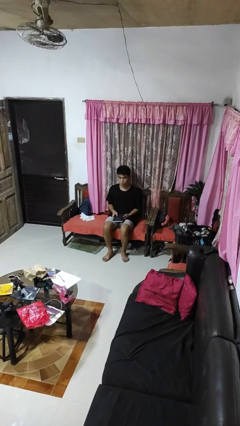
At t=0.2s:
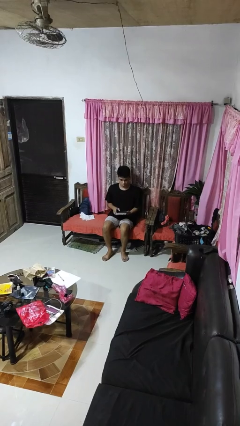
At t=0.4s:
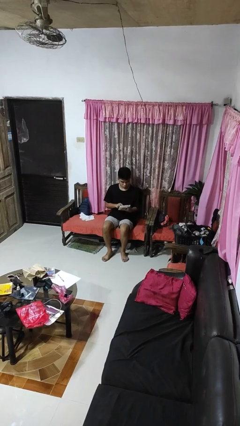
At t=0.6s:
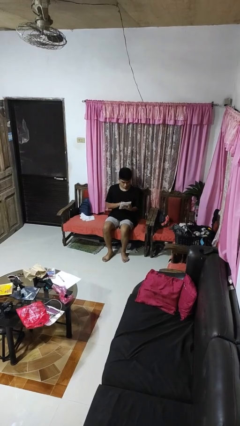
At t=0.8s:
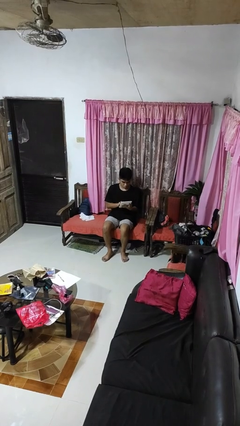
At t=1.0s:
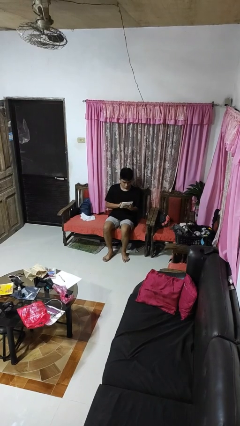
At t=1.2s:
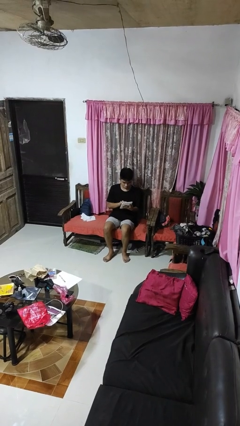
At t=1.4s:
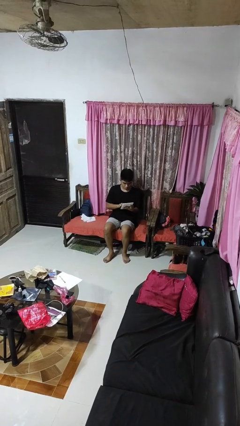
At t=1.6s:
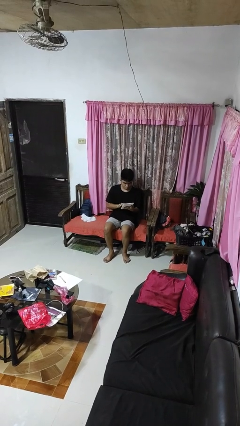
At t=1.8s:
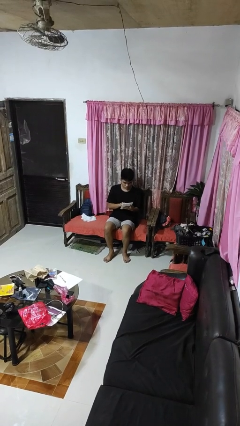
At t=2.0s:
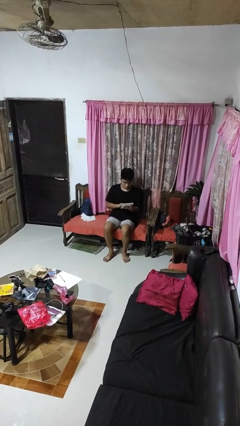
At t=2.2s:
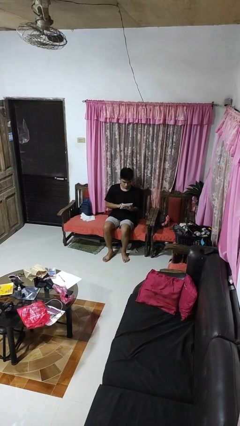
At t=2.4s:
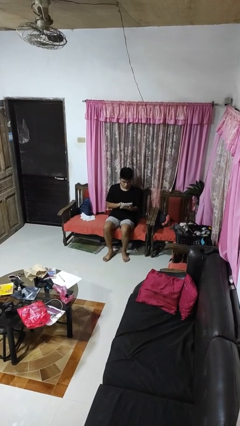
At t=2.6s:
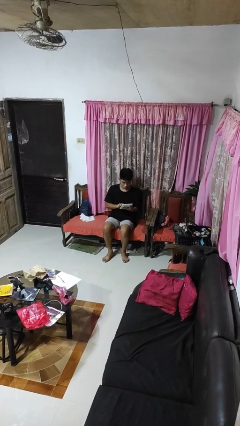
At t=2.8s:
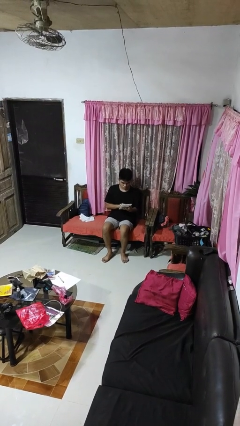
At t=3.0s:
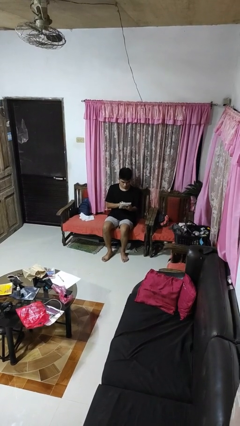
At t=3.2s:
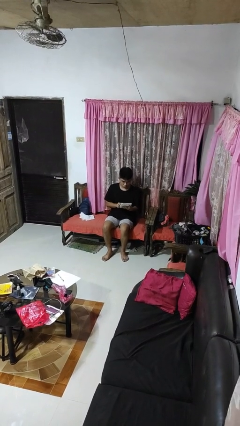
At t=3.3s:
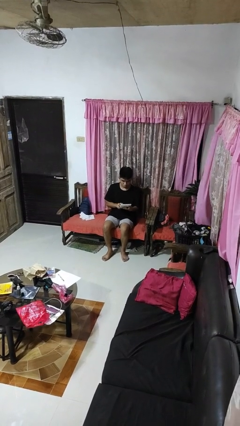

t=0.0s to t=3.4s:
person interacts with tablet

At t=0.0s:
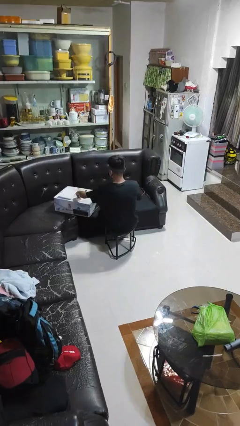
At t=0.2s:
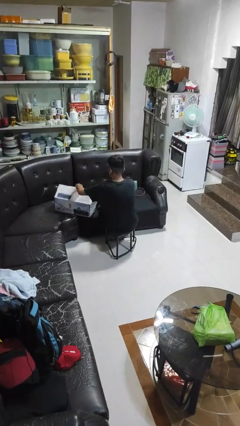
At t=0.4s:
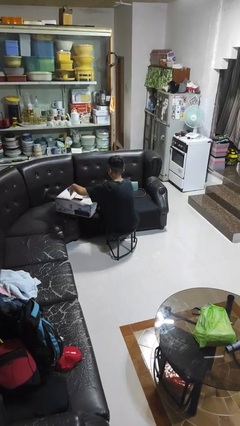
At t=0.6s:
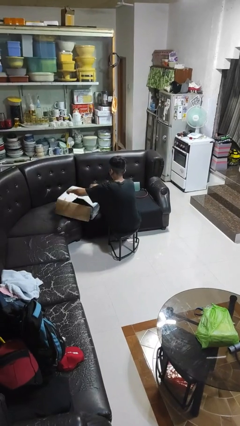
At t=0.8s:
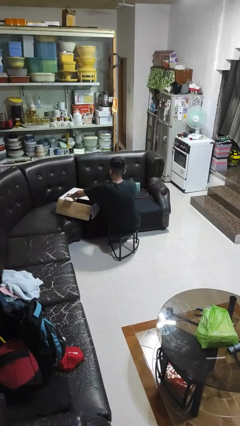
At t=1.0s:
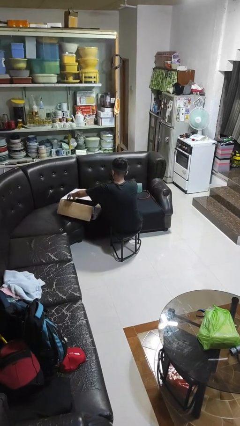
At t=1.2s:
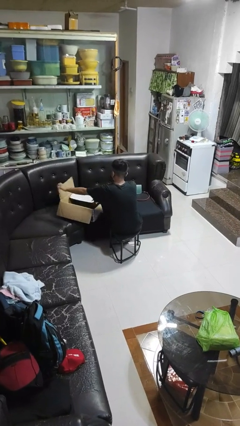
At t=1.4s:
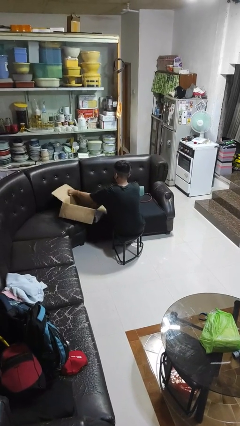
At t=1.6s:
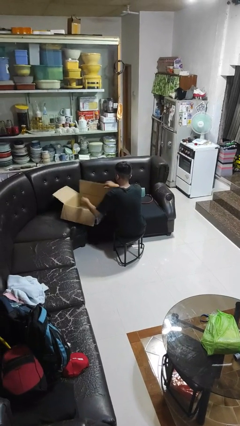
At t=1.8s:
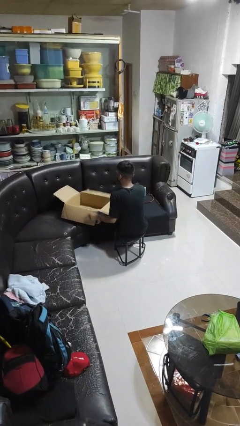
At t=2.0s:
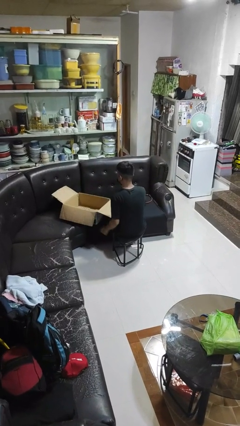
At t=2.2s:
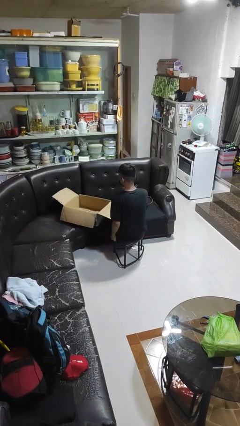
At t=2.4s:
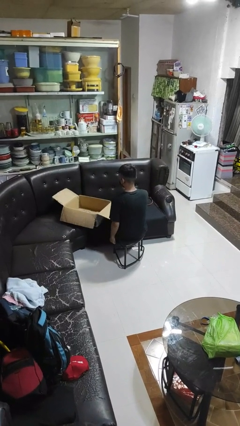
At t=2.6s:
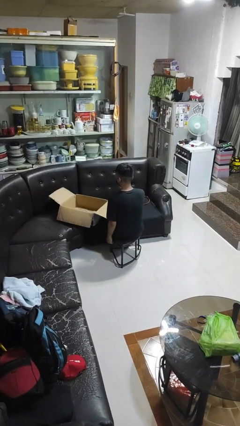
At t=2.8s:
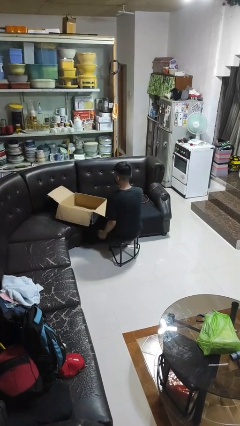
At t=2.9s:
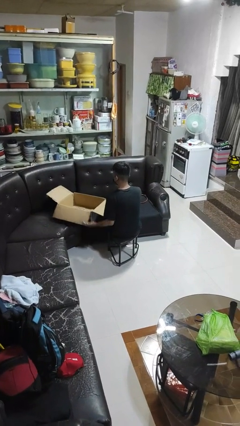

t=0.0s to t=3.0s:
person opens box

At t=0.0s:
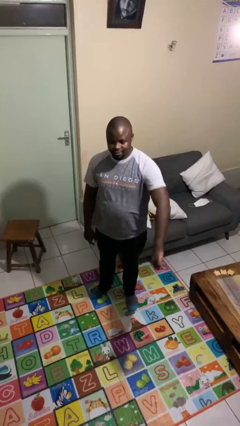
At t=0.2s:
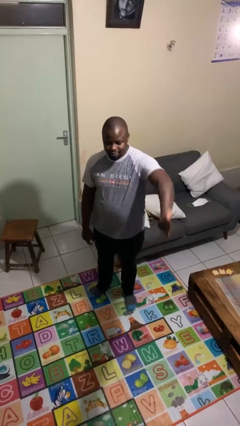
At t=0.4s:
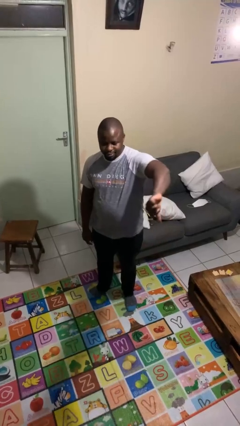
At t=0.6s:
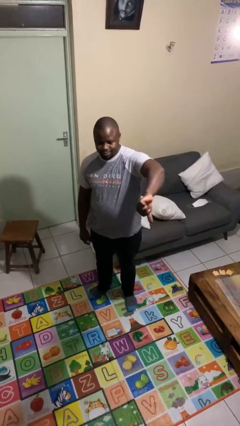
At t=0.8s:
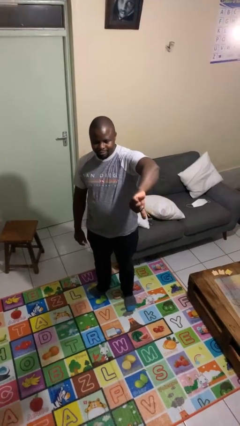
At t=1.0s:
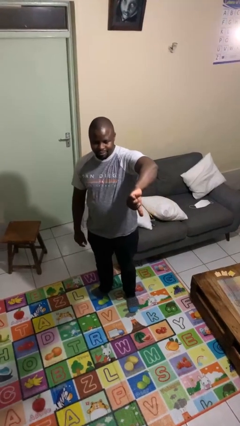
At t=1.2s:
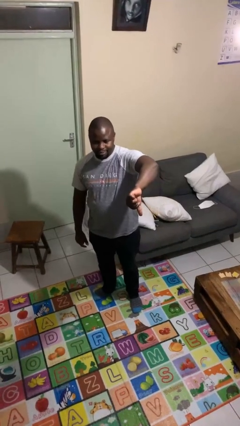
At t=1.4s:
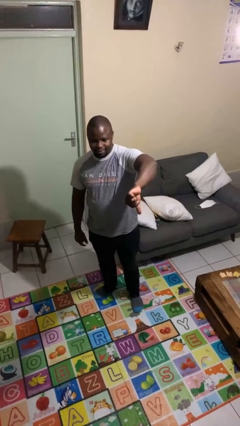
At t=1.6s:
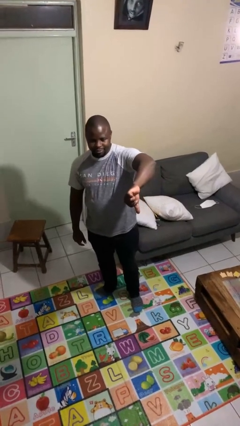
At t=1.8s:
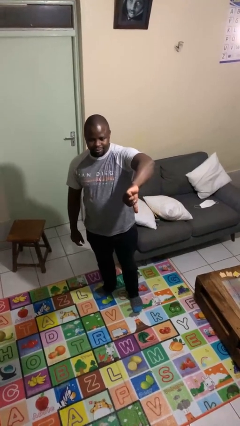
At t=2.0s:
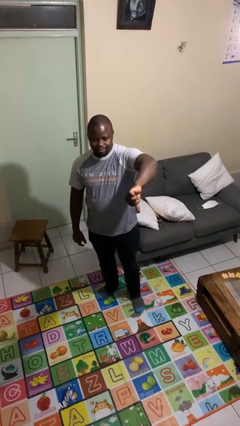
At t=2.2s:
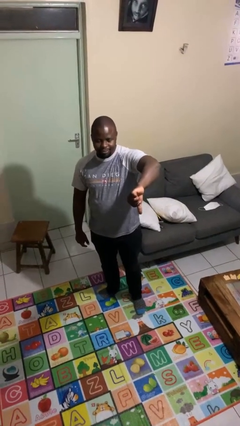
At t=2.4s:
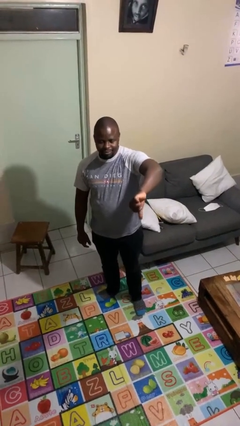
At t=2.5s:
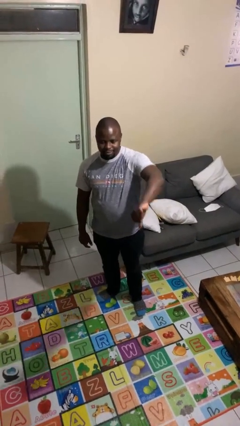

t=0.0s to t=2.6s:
person gestures thumbs down

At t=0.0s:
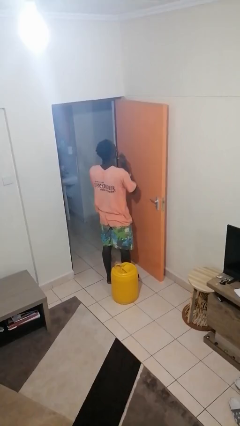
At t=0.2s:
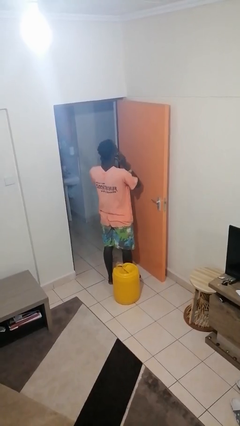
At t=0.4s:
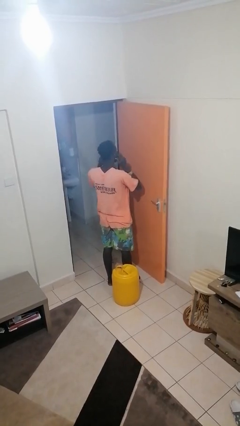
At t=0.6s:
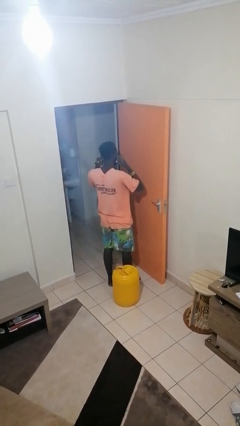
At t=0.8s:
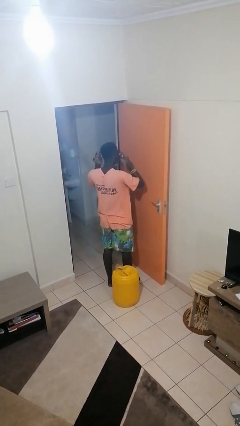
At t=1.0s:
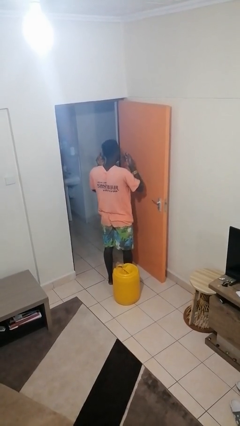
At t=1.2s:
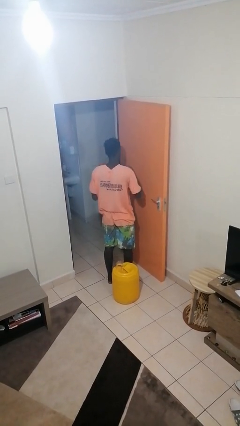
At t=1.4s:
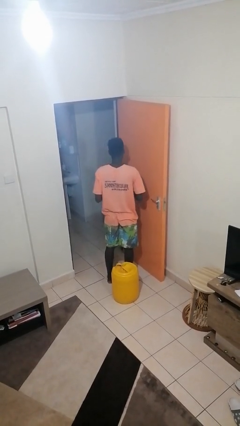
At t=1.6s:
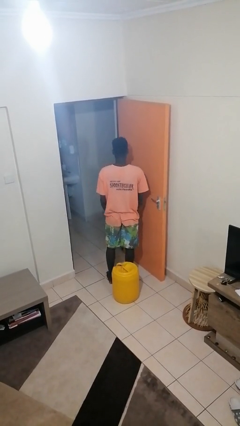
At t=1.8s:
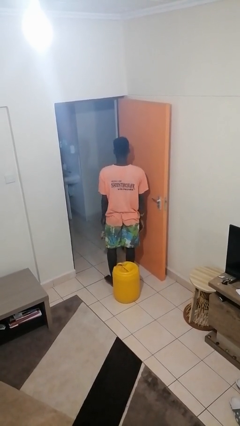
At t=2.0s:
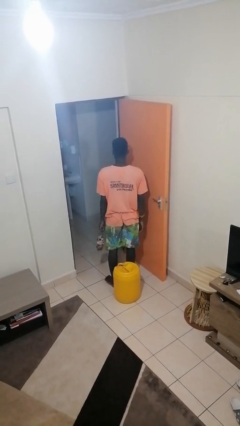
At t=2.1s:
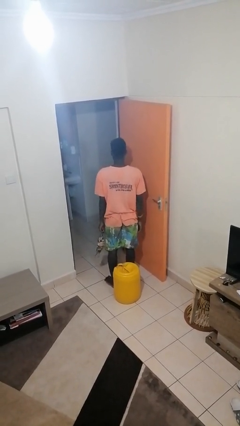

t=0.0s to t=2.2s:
person takes off facemask

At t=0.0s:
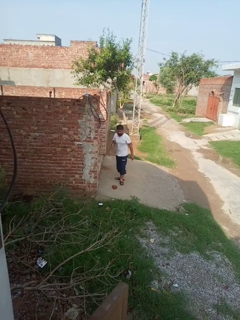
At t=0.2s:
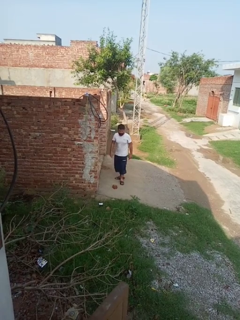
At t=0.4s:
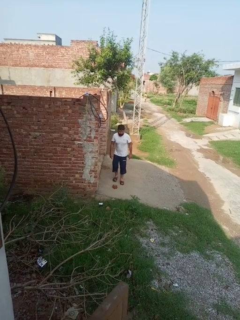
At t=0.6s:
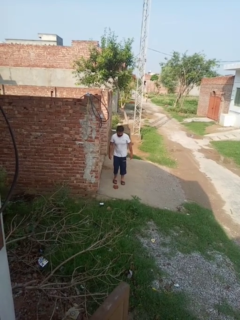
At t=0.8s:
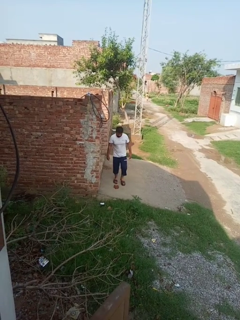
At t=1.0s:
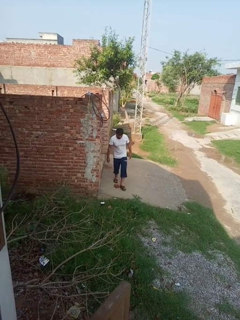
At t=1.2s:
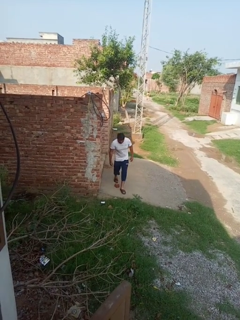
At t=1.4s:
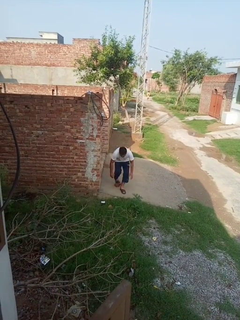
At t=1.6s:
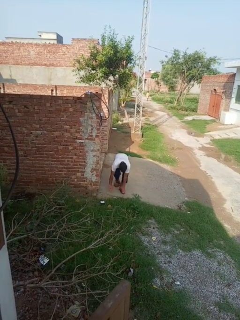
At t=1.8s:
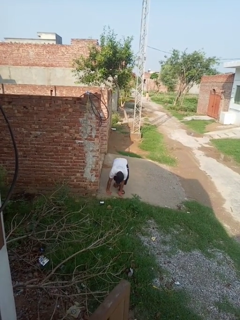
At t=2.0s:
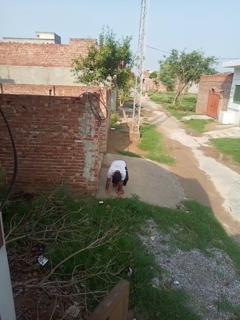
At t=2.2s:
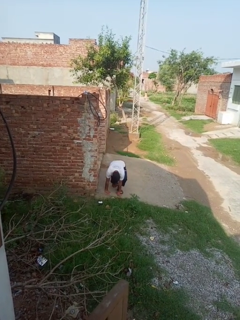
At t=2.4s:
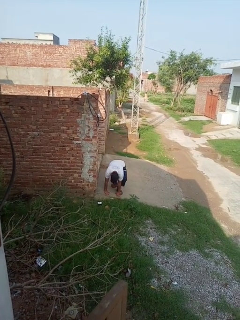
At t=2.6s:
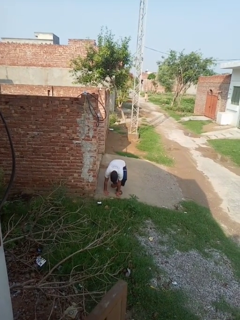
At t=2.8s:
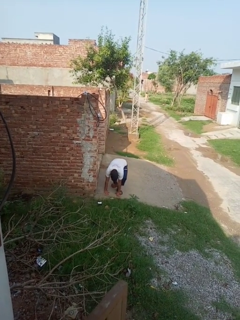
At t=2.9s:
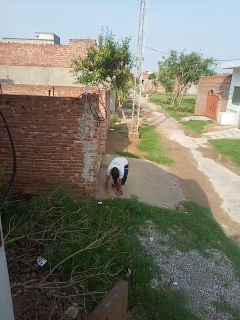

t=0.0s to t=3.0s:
person trips on object on floor

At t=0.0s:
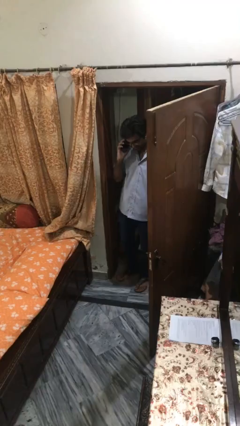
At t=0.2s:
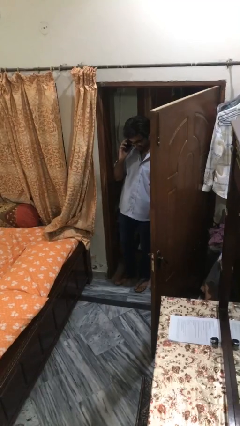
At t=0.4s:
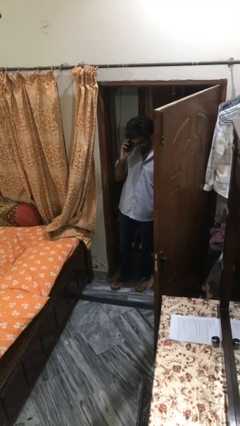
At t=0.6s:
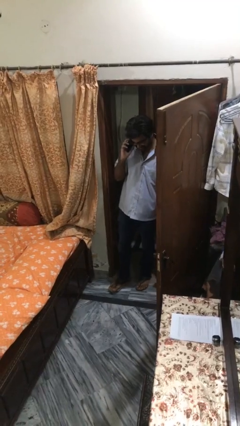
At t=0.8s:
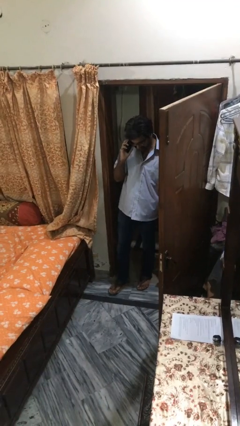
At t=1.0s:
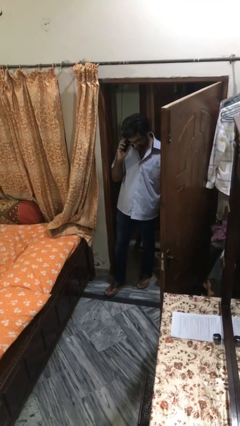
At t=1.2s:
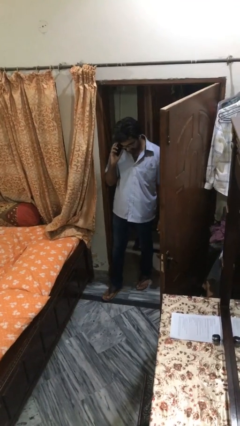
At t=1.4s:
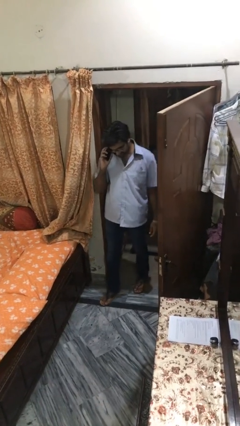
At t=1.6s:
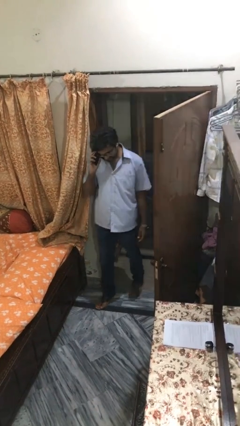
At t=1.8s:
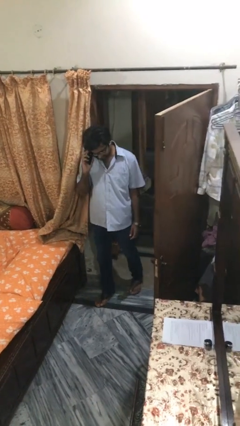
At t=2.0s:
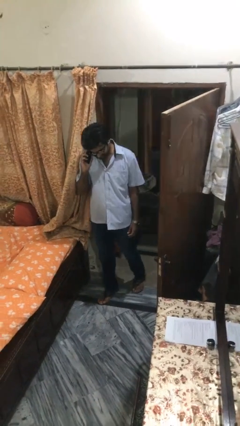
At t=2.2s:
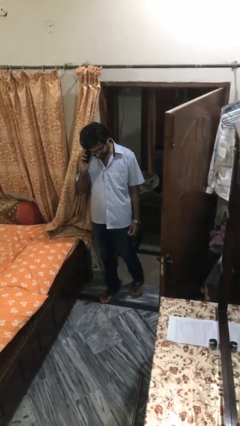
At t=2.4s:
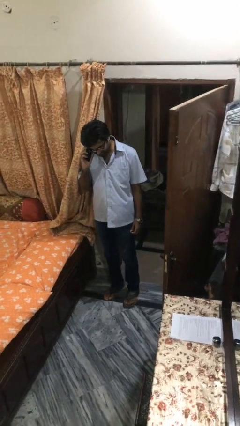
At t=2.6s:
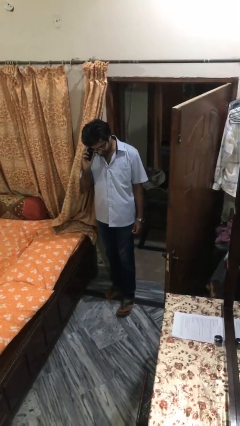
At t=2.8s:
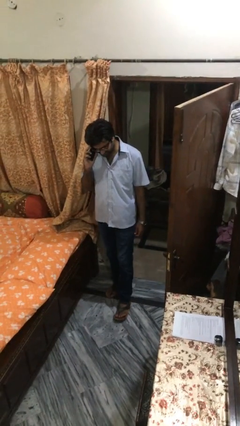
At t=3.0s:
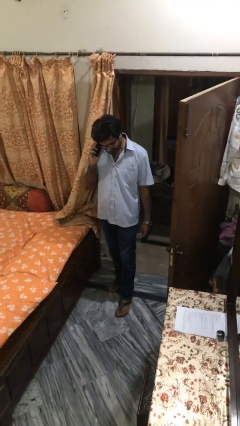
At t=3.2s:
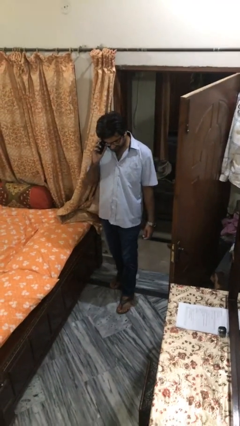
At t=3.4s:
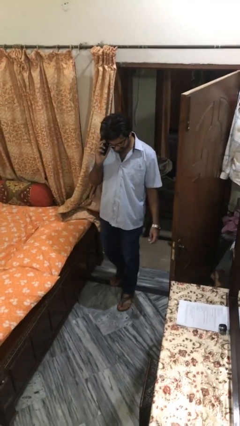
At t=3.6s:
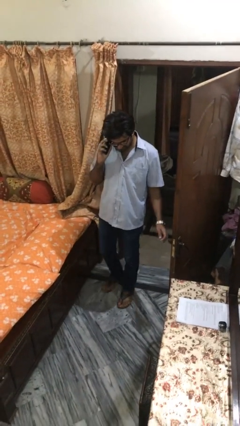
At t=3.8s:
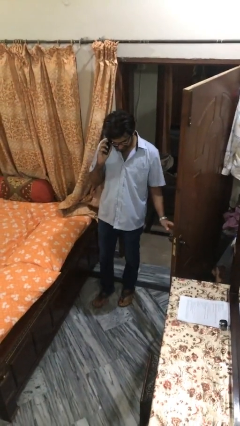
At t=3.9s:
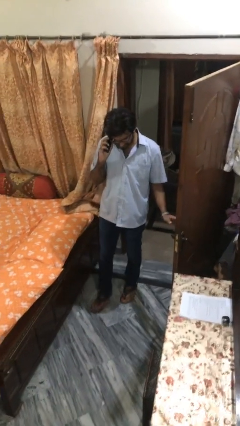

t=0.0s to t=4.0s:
person enters scene through structure
